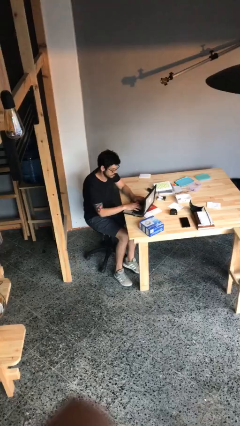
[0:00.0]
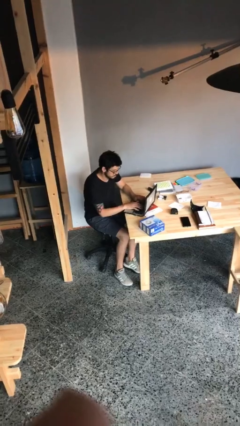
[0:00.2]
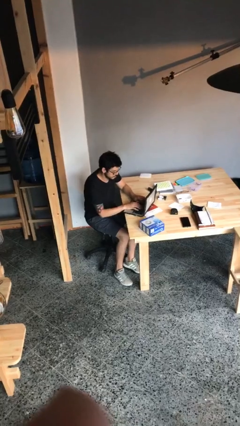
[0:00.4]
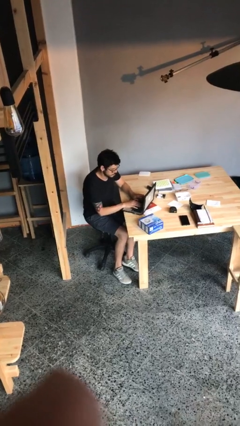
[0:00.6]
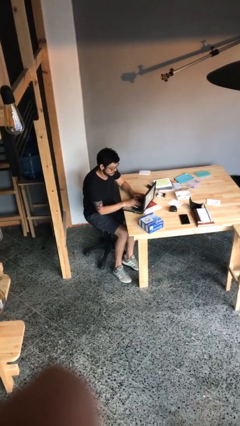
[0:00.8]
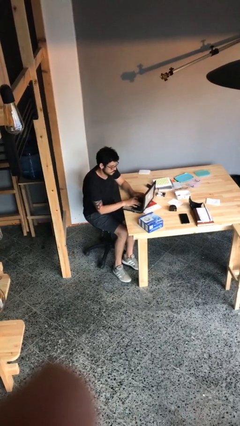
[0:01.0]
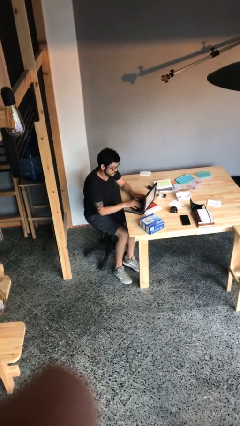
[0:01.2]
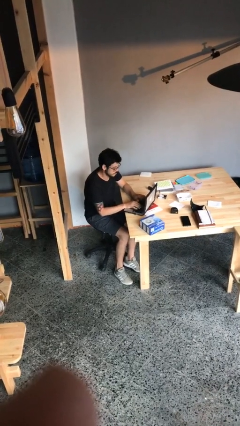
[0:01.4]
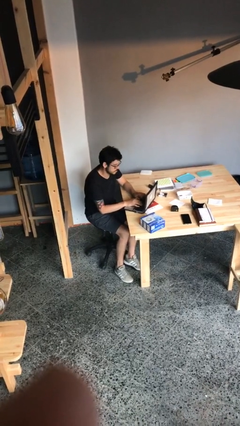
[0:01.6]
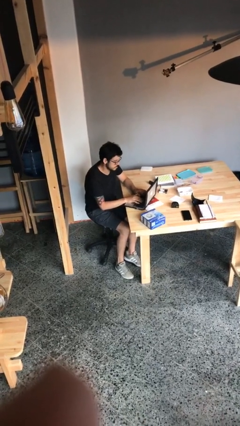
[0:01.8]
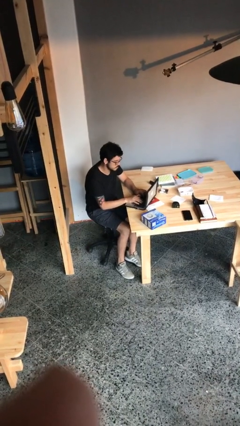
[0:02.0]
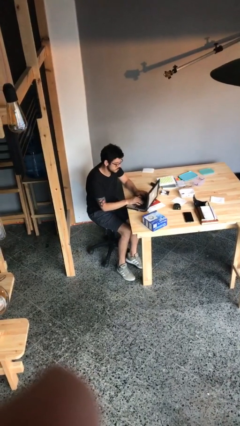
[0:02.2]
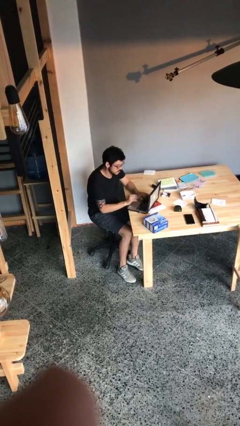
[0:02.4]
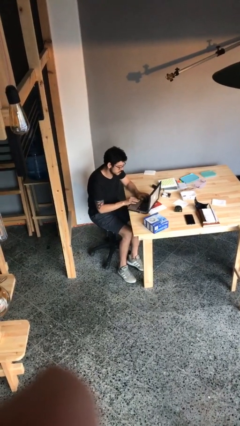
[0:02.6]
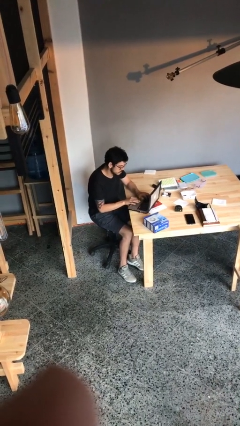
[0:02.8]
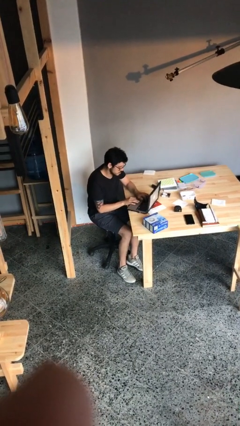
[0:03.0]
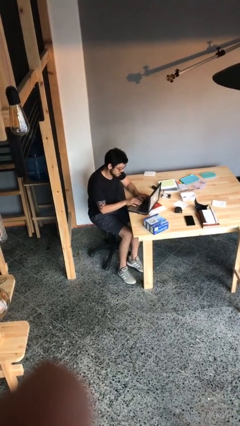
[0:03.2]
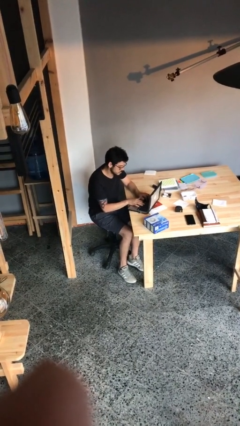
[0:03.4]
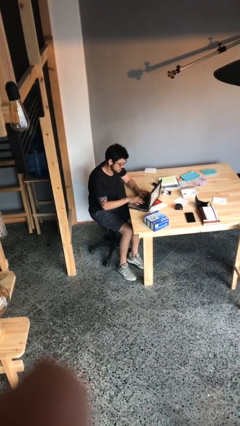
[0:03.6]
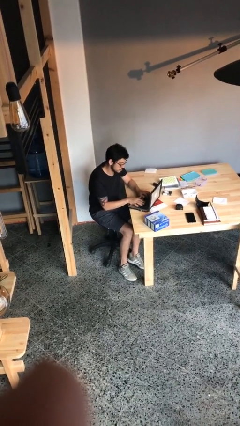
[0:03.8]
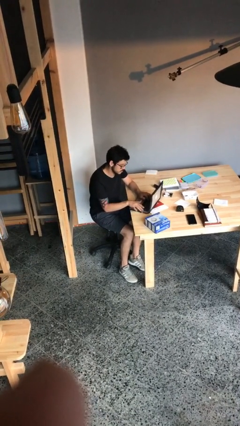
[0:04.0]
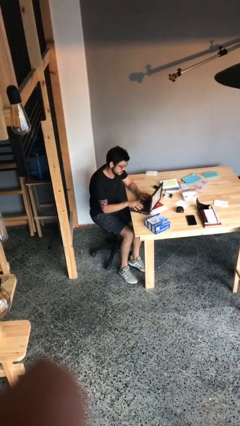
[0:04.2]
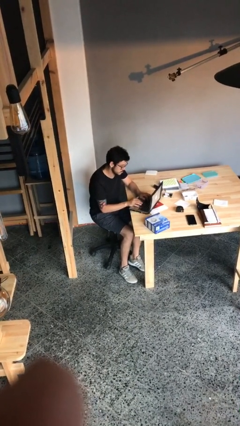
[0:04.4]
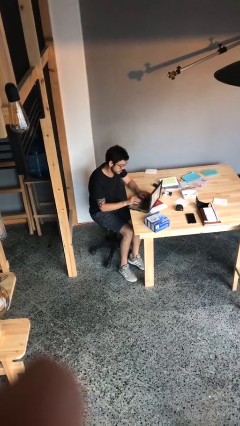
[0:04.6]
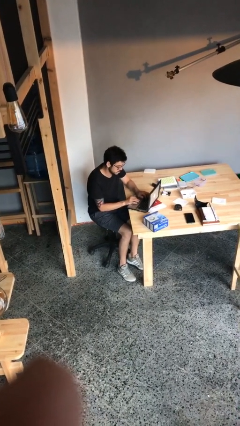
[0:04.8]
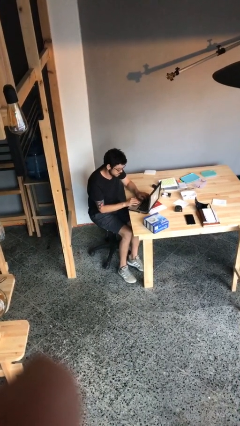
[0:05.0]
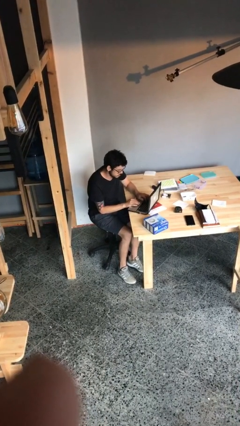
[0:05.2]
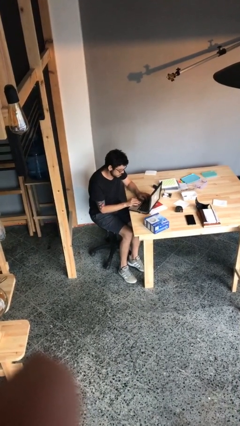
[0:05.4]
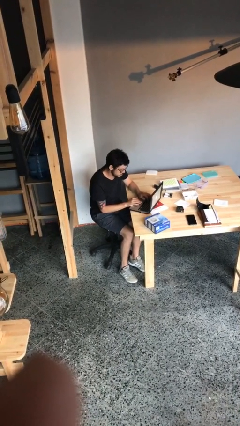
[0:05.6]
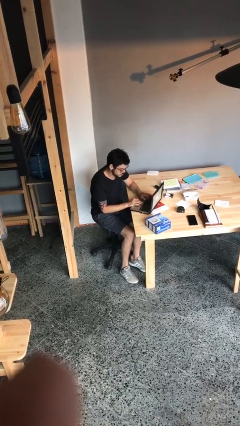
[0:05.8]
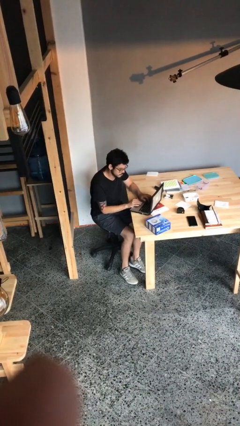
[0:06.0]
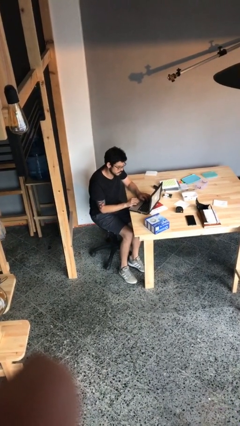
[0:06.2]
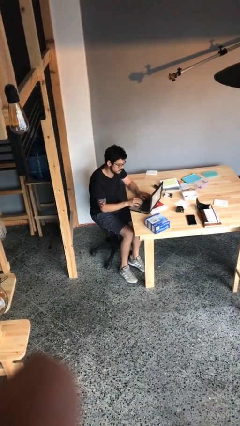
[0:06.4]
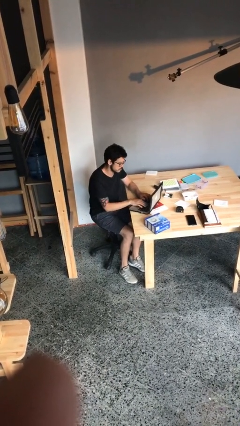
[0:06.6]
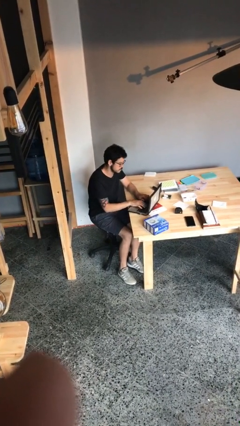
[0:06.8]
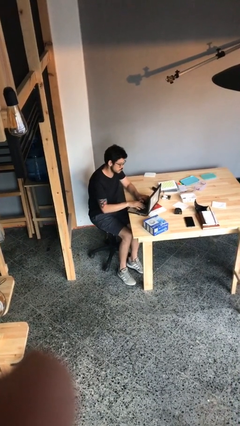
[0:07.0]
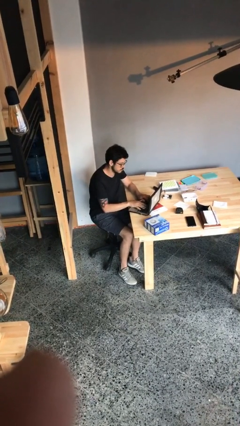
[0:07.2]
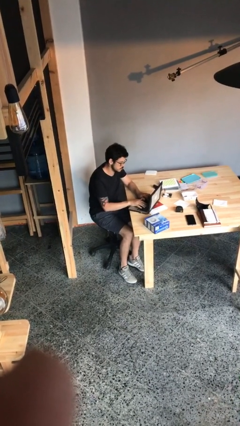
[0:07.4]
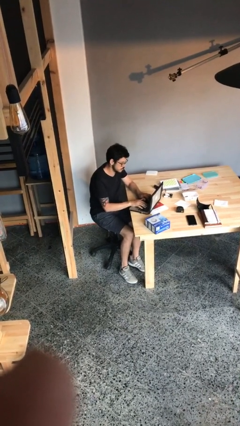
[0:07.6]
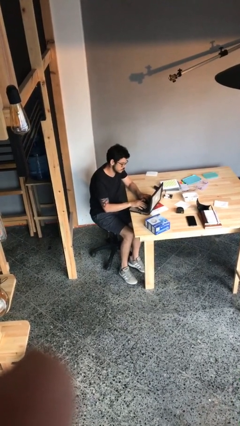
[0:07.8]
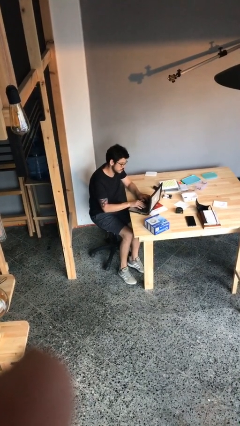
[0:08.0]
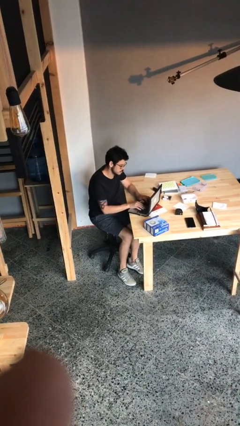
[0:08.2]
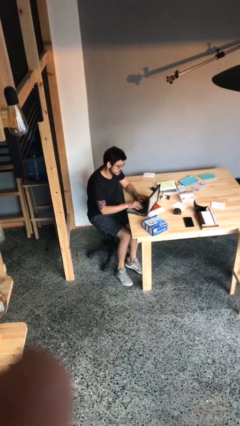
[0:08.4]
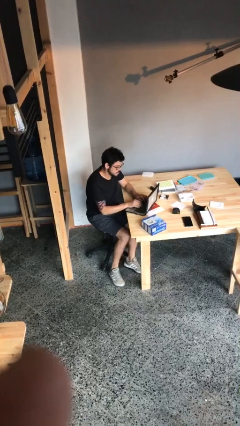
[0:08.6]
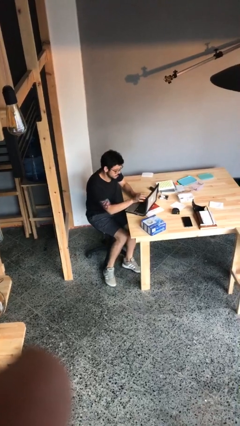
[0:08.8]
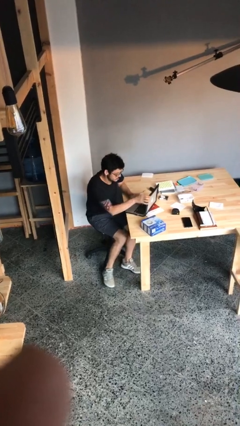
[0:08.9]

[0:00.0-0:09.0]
person interacts with laptop

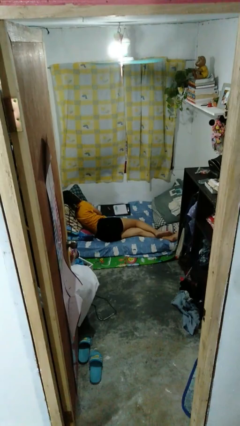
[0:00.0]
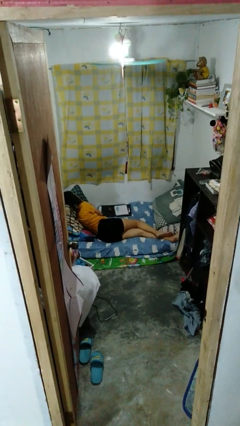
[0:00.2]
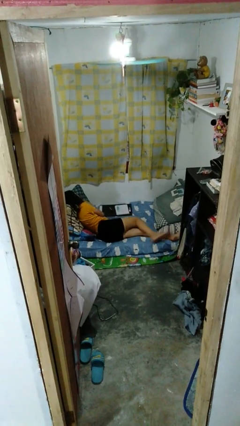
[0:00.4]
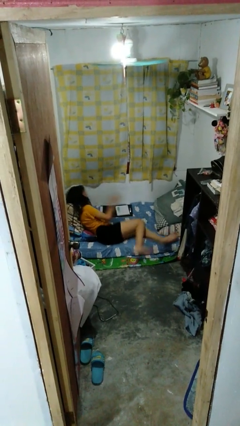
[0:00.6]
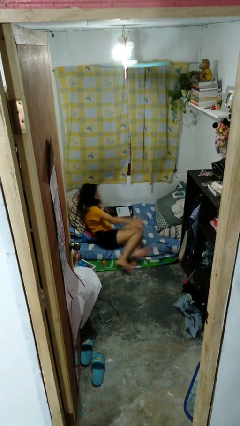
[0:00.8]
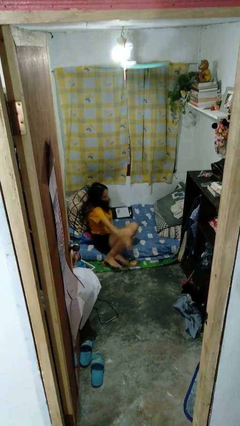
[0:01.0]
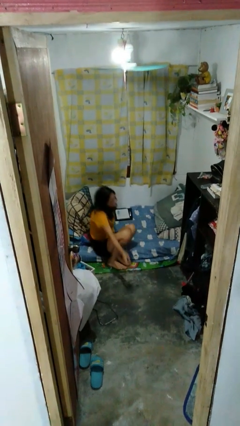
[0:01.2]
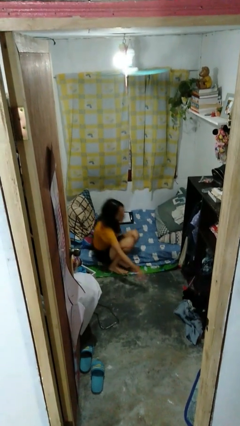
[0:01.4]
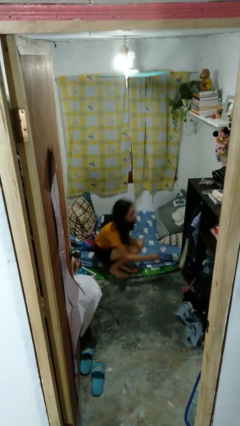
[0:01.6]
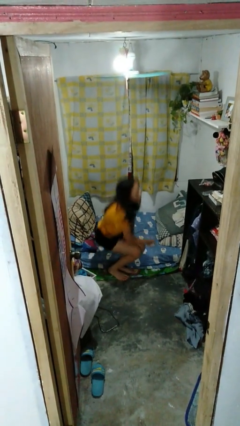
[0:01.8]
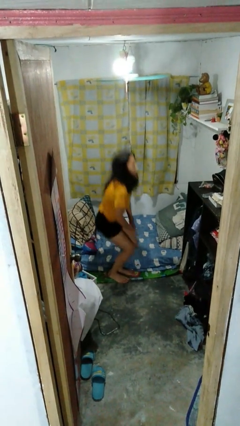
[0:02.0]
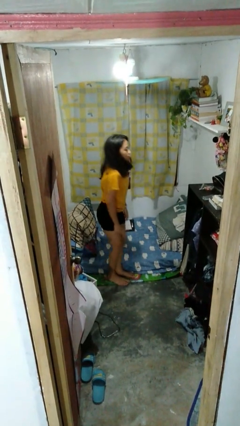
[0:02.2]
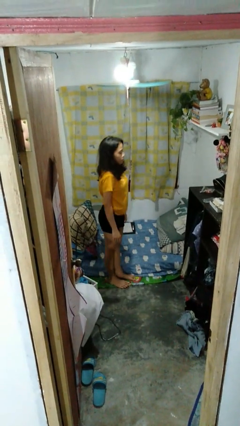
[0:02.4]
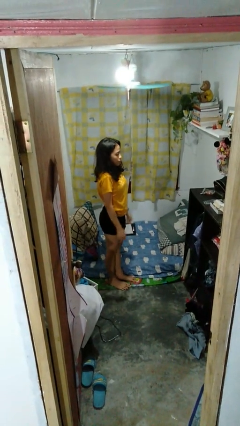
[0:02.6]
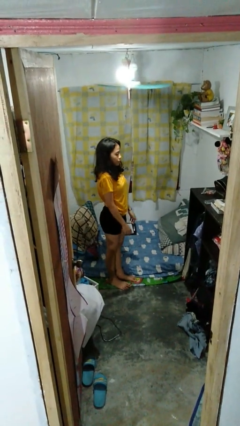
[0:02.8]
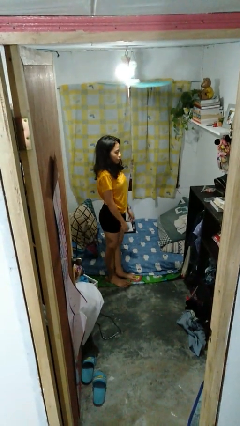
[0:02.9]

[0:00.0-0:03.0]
person stands up

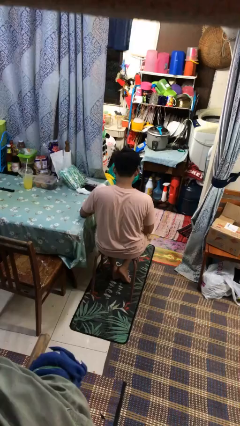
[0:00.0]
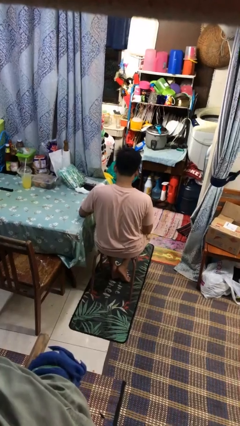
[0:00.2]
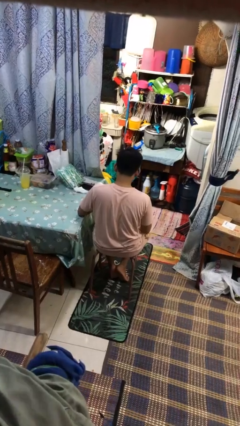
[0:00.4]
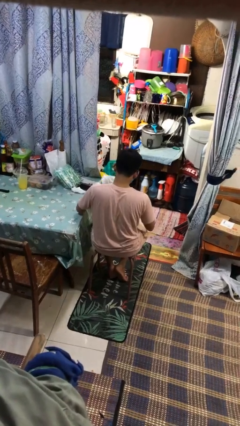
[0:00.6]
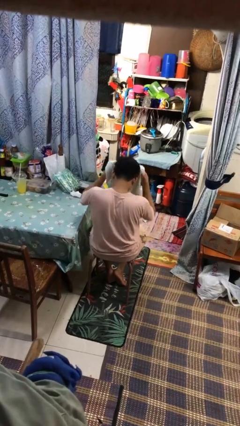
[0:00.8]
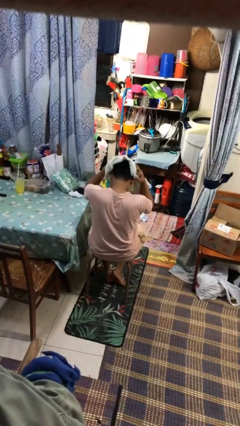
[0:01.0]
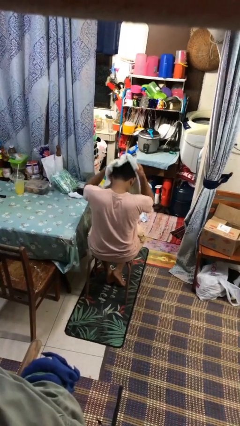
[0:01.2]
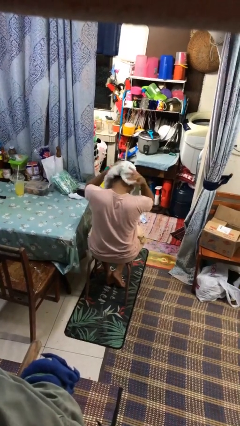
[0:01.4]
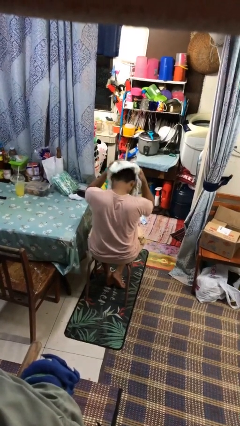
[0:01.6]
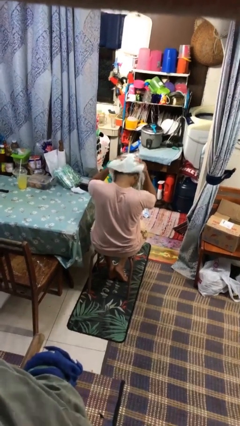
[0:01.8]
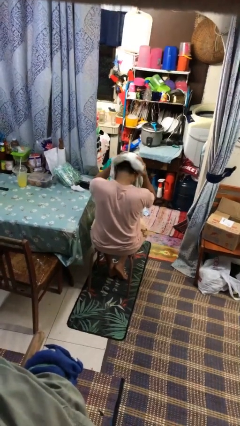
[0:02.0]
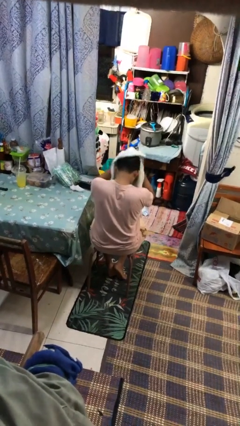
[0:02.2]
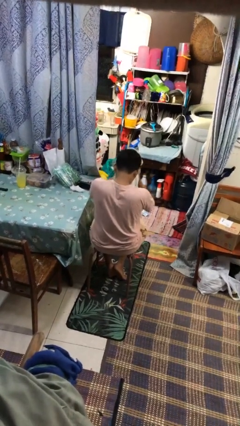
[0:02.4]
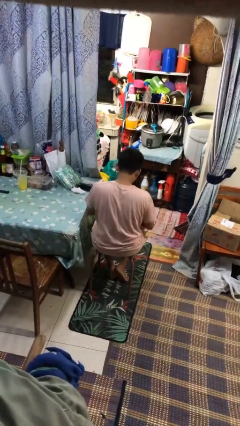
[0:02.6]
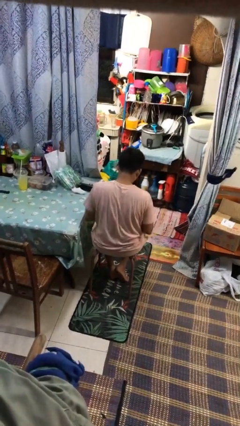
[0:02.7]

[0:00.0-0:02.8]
person dries hair with towel

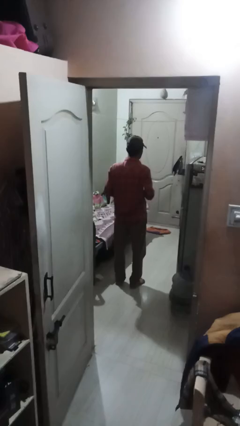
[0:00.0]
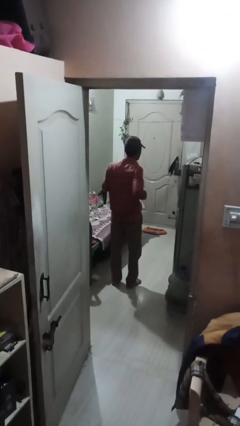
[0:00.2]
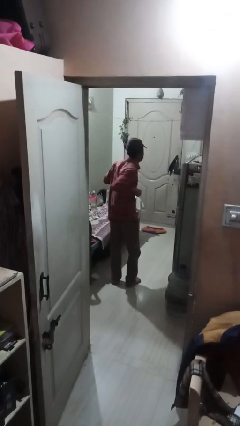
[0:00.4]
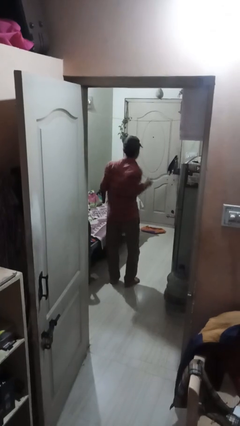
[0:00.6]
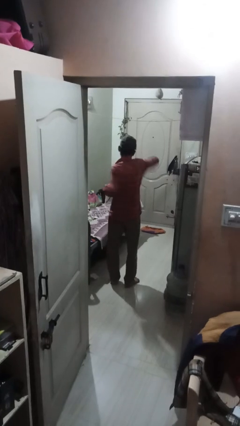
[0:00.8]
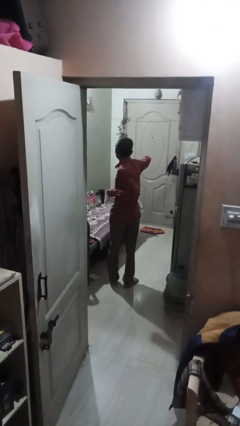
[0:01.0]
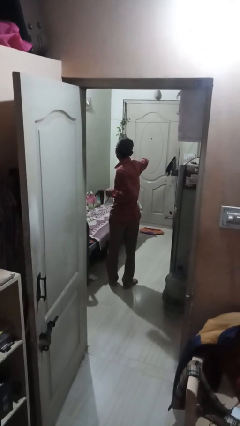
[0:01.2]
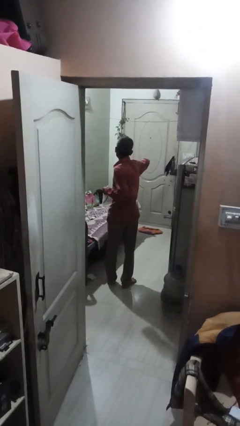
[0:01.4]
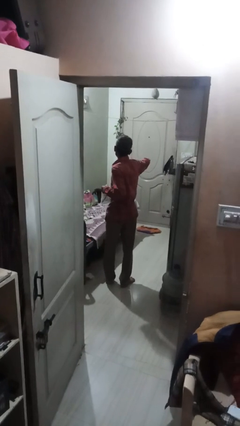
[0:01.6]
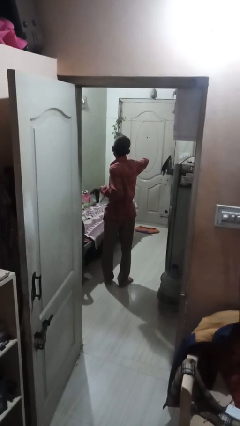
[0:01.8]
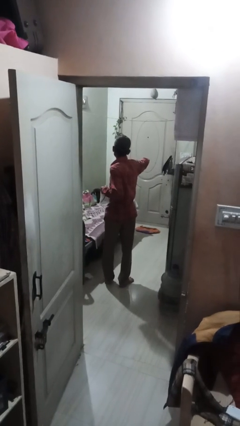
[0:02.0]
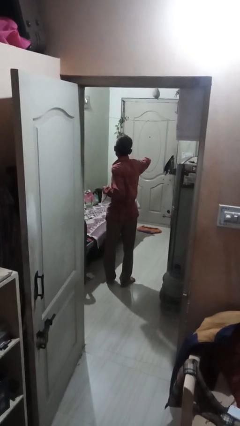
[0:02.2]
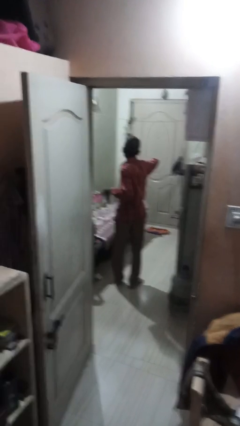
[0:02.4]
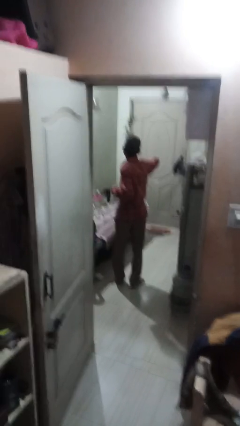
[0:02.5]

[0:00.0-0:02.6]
person punches

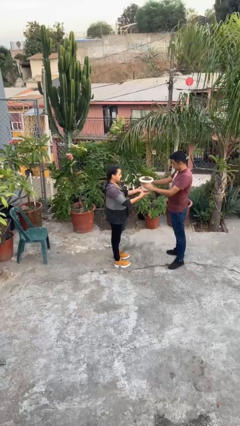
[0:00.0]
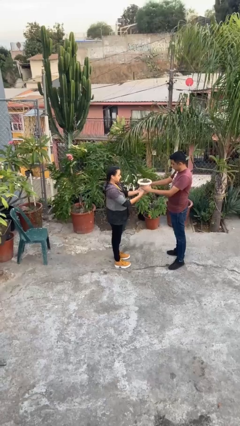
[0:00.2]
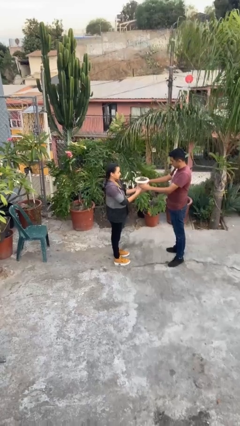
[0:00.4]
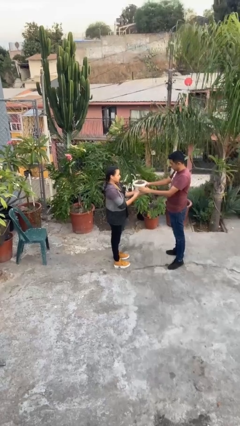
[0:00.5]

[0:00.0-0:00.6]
person transfers object to person
